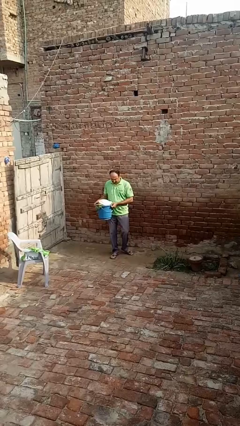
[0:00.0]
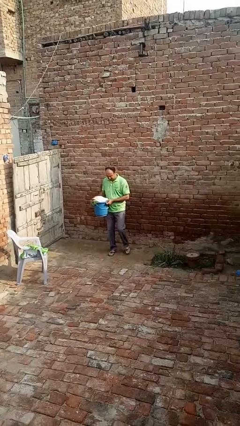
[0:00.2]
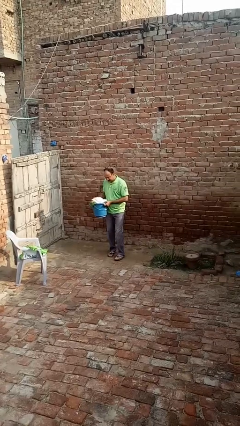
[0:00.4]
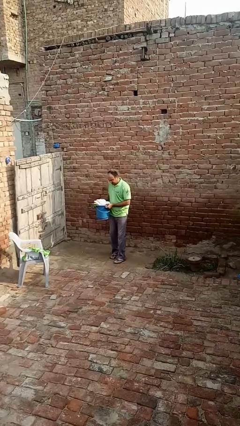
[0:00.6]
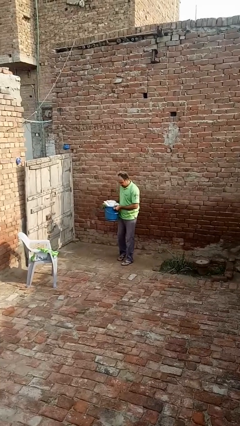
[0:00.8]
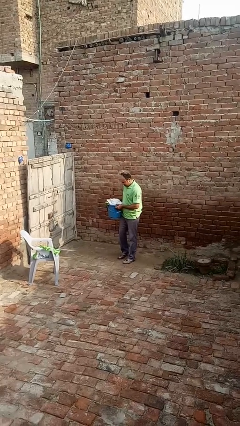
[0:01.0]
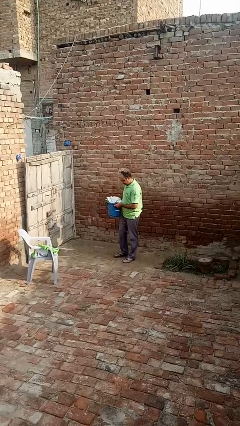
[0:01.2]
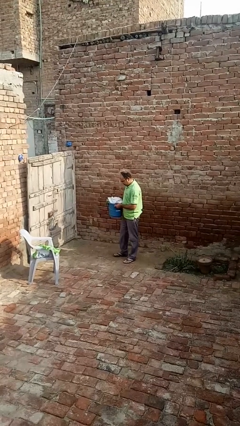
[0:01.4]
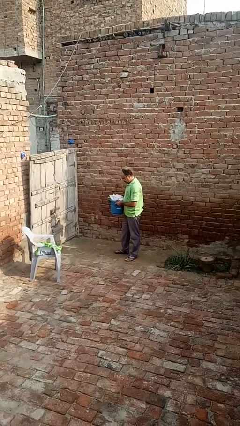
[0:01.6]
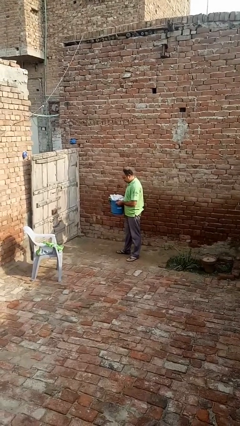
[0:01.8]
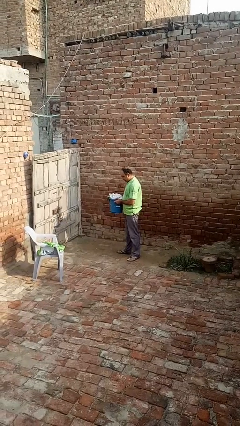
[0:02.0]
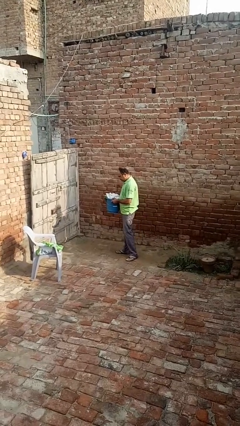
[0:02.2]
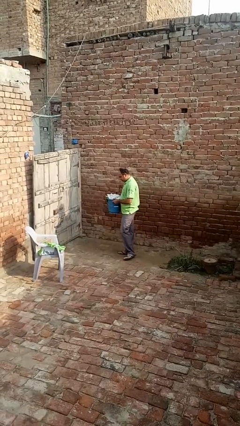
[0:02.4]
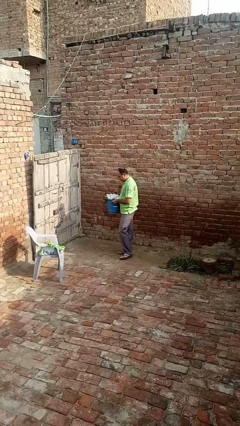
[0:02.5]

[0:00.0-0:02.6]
person carries laundry basket

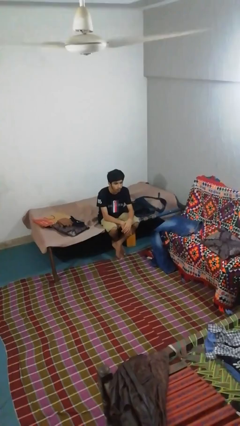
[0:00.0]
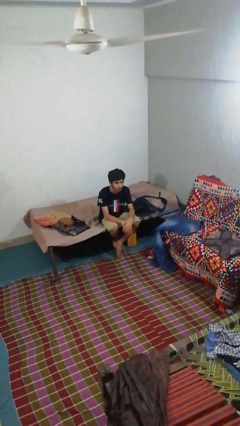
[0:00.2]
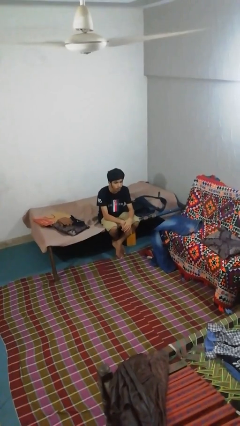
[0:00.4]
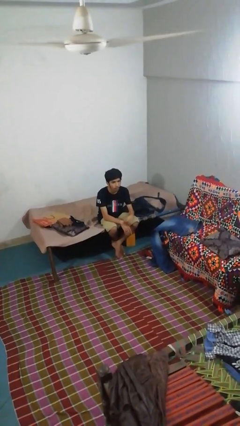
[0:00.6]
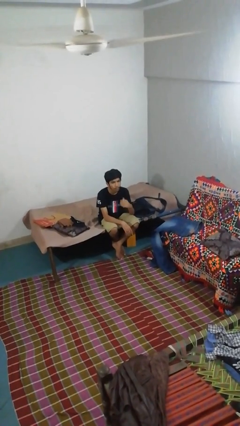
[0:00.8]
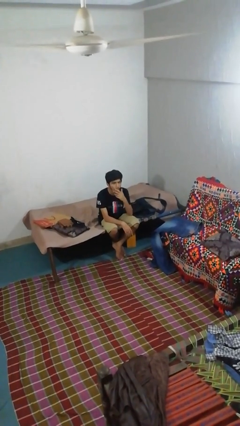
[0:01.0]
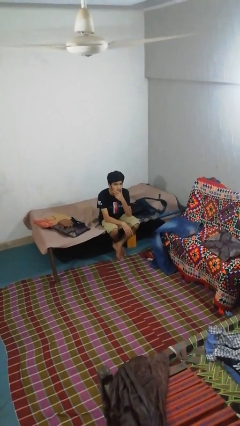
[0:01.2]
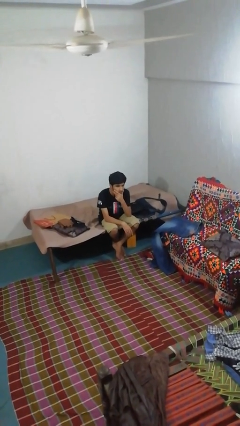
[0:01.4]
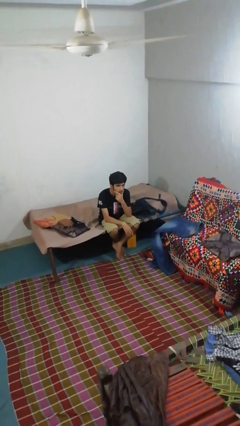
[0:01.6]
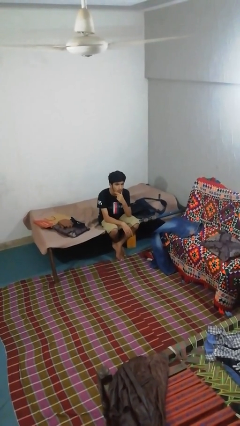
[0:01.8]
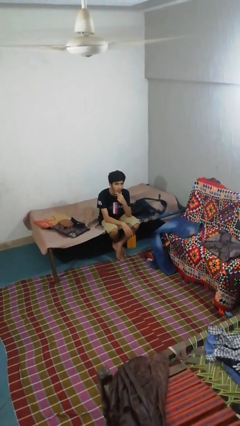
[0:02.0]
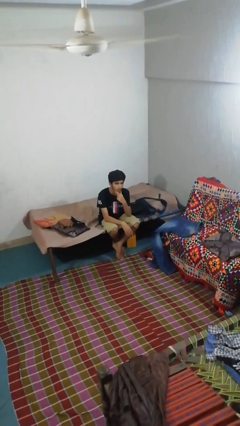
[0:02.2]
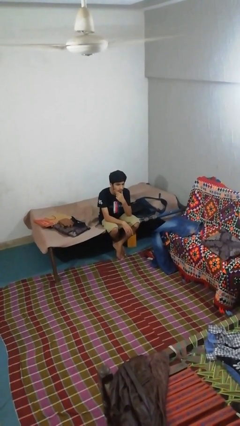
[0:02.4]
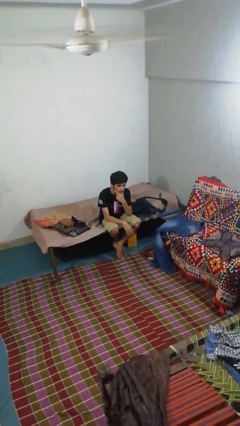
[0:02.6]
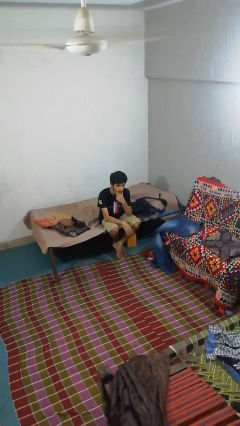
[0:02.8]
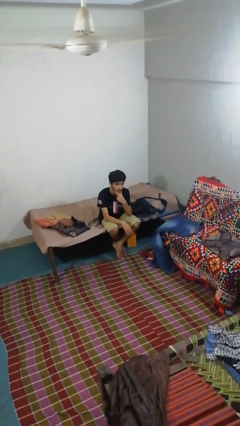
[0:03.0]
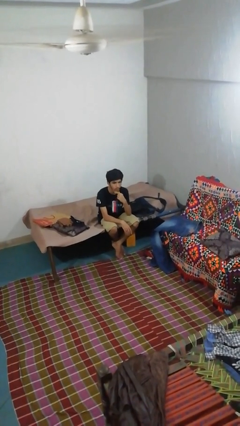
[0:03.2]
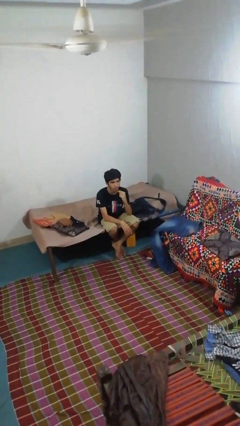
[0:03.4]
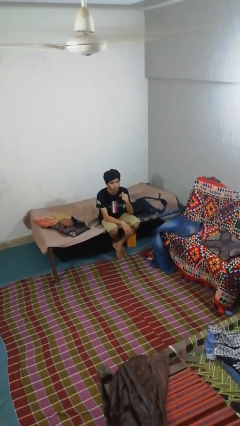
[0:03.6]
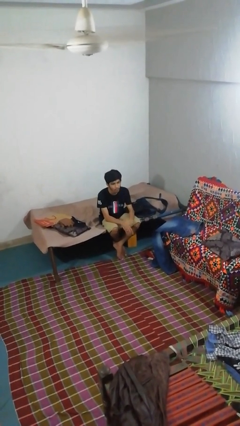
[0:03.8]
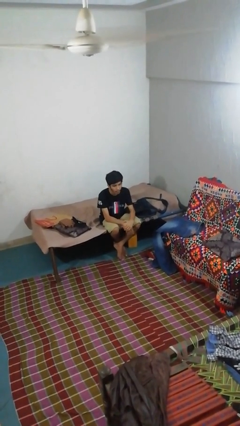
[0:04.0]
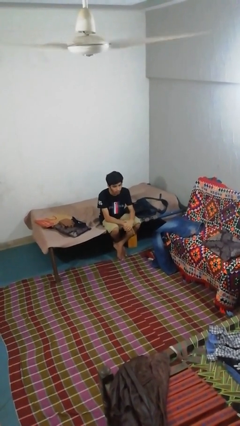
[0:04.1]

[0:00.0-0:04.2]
person strokes chin

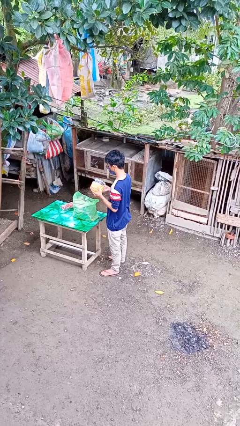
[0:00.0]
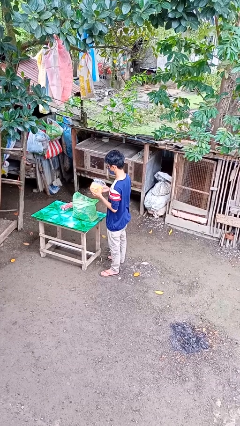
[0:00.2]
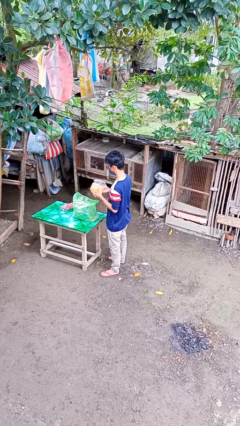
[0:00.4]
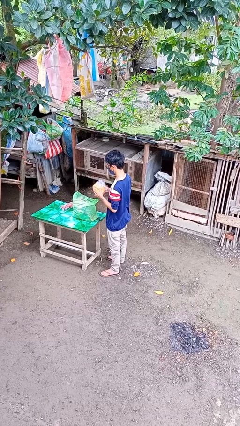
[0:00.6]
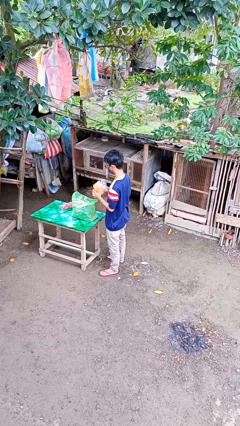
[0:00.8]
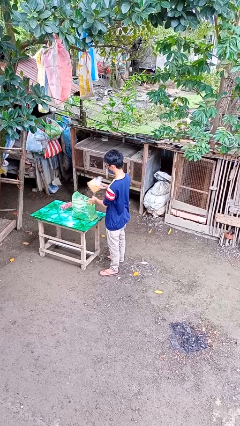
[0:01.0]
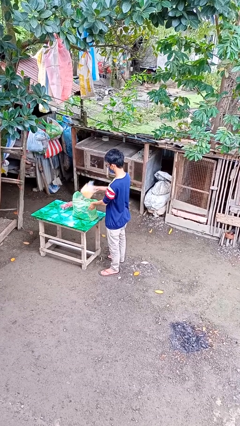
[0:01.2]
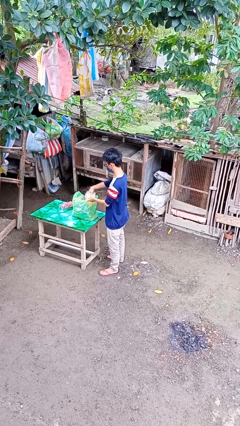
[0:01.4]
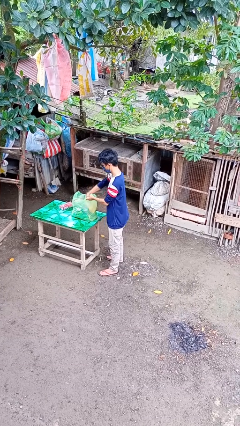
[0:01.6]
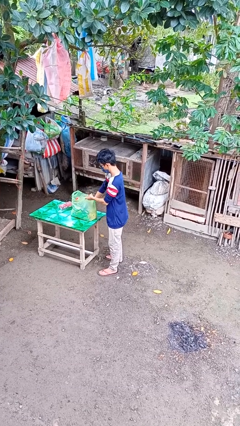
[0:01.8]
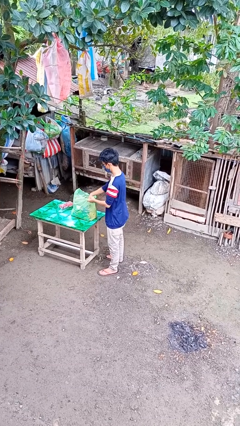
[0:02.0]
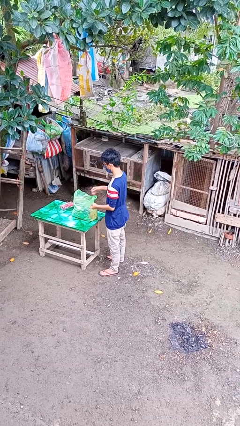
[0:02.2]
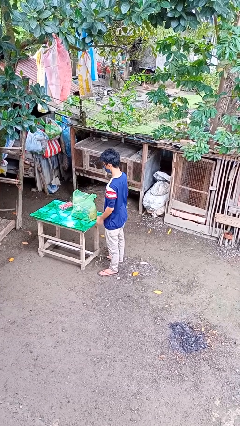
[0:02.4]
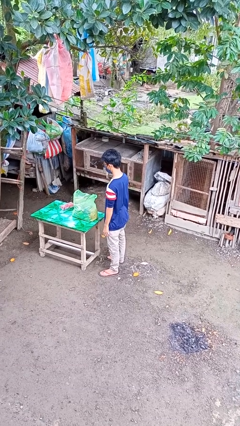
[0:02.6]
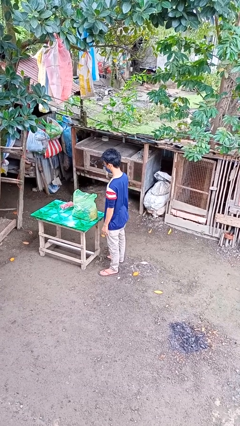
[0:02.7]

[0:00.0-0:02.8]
person puts object into bag

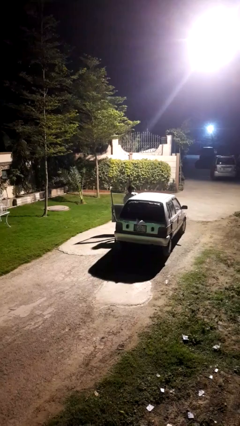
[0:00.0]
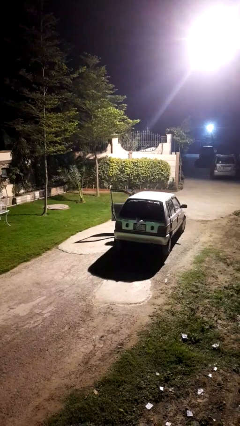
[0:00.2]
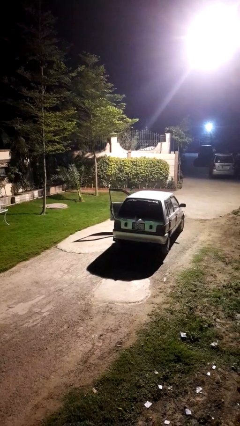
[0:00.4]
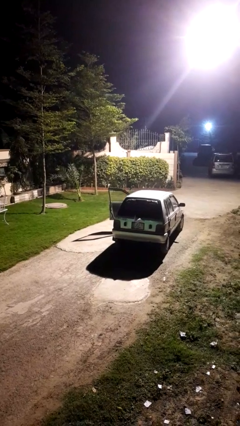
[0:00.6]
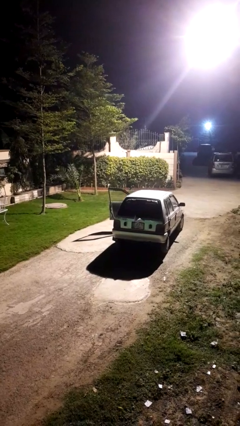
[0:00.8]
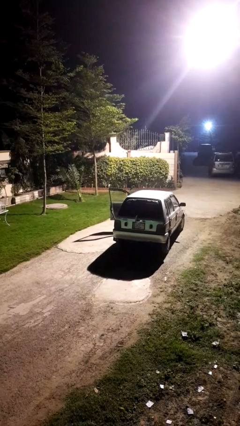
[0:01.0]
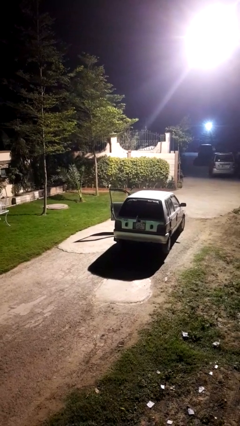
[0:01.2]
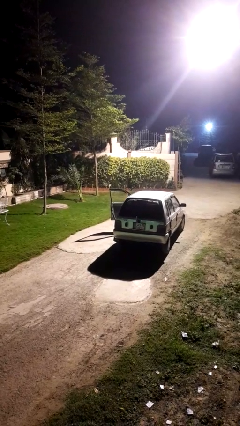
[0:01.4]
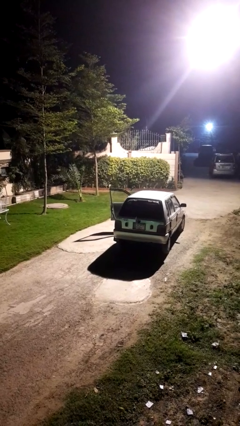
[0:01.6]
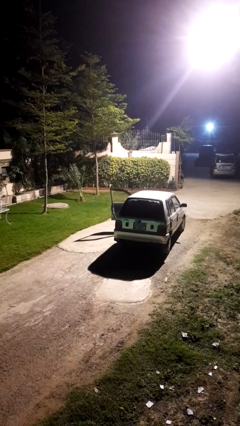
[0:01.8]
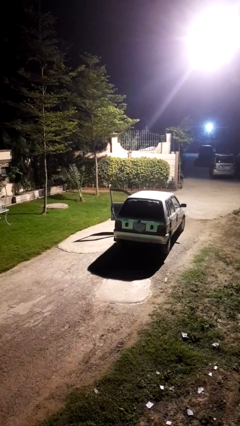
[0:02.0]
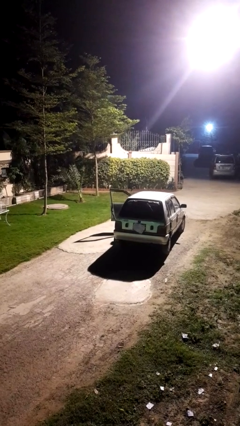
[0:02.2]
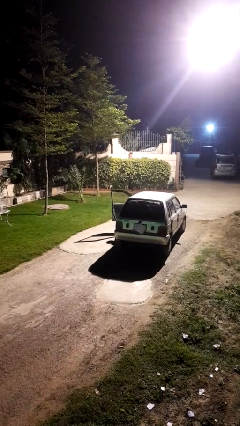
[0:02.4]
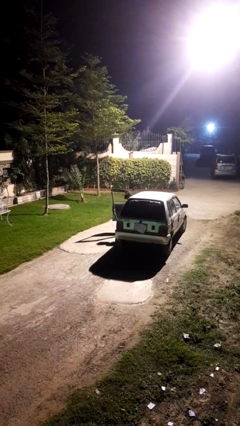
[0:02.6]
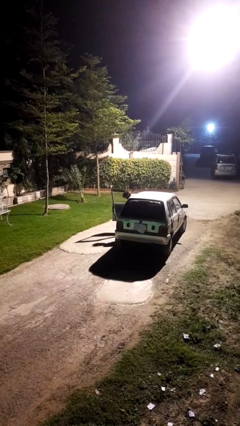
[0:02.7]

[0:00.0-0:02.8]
person enters car

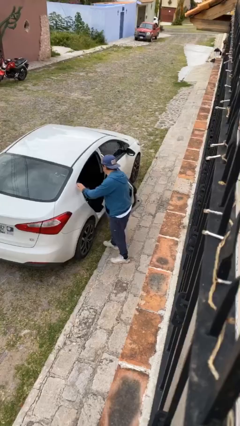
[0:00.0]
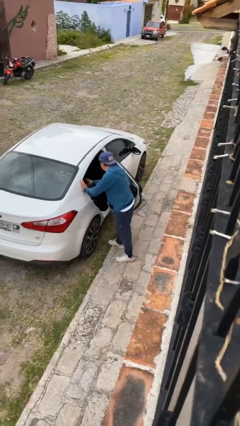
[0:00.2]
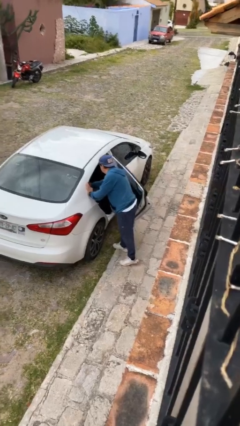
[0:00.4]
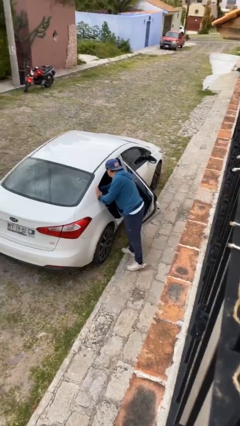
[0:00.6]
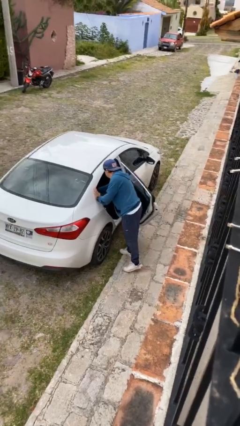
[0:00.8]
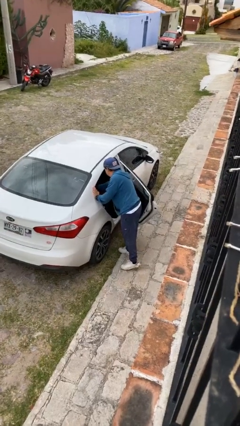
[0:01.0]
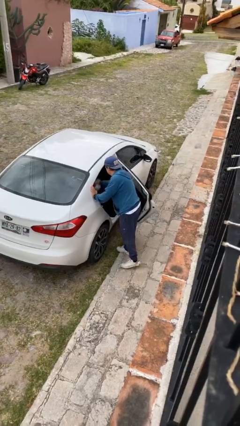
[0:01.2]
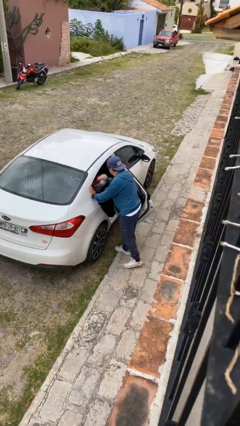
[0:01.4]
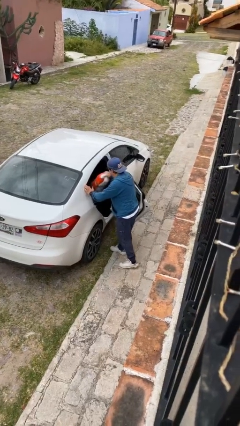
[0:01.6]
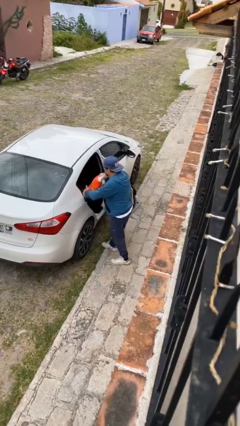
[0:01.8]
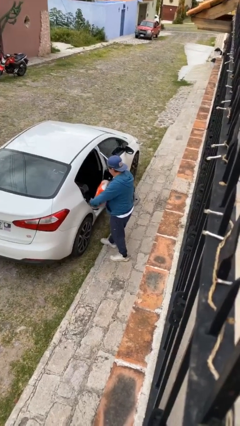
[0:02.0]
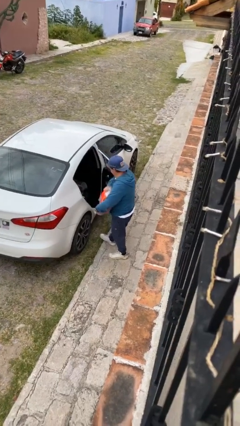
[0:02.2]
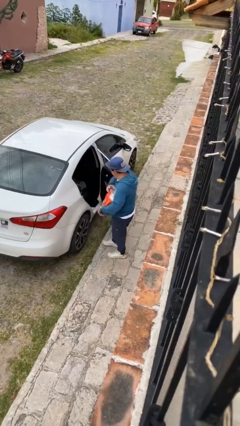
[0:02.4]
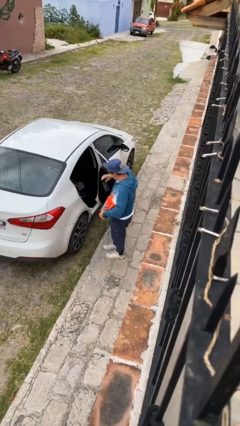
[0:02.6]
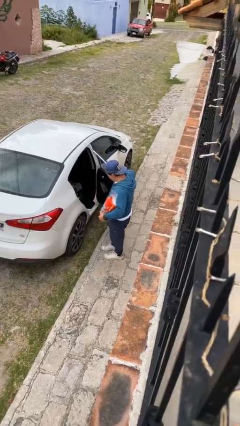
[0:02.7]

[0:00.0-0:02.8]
person unloads car

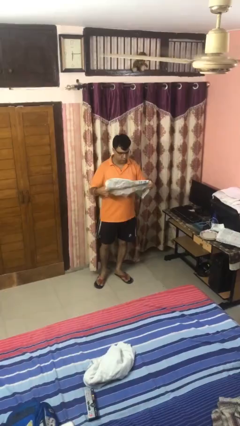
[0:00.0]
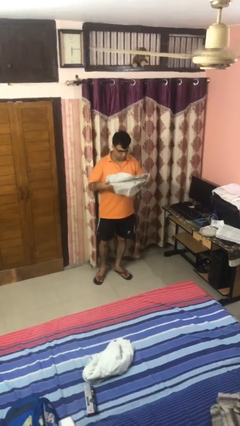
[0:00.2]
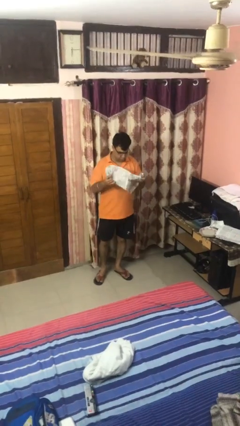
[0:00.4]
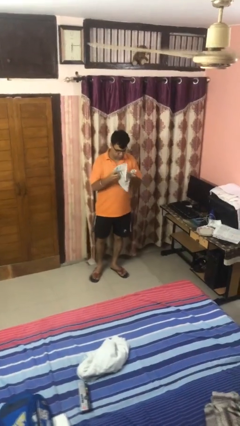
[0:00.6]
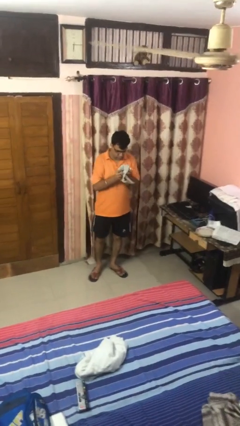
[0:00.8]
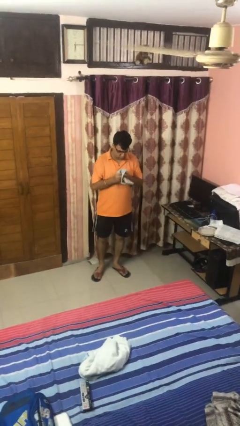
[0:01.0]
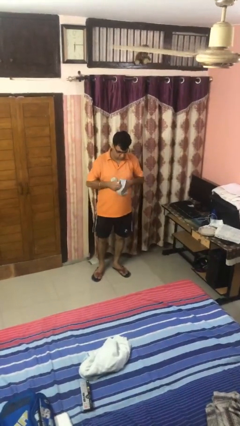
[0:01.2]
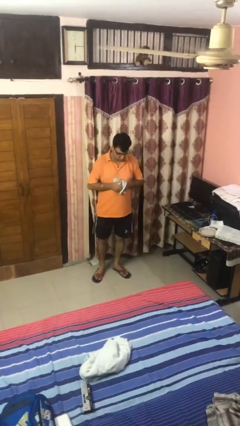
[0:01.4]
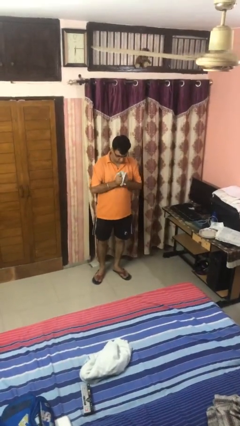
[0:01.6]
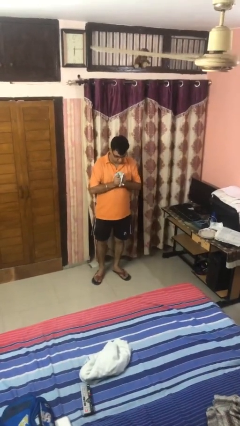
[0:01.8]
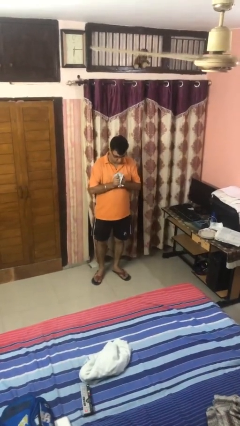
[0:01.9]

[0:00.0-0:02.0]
person crumples paper

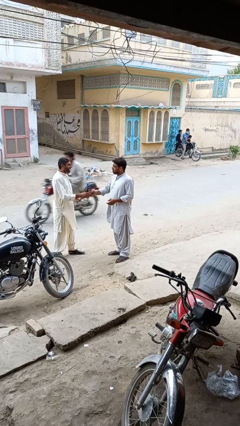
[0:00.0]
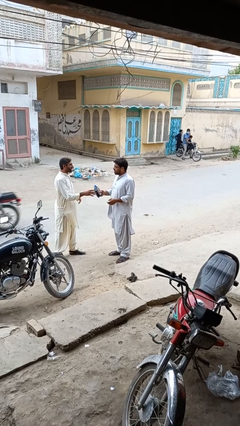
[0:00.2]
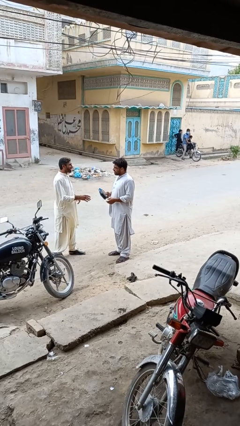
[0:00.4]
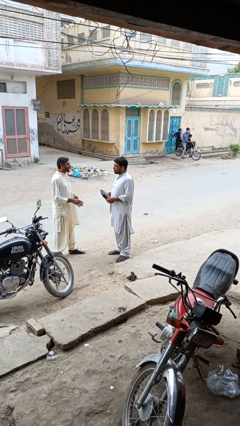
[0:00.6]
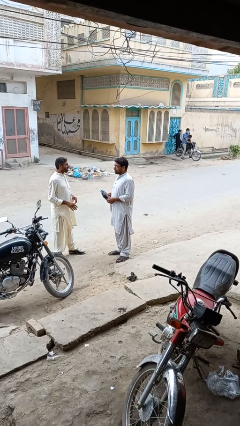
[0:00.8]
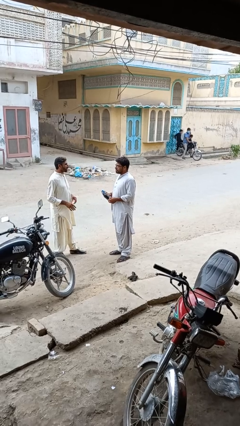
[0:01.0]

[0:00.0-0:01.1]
person transfers object to person
